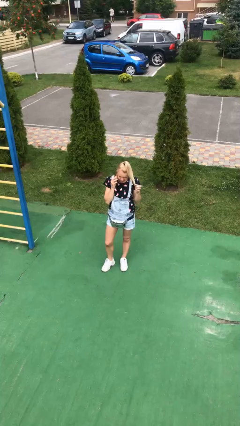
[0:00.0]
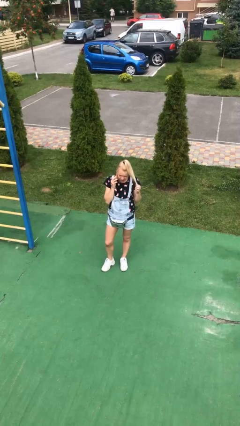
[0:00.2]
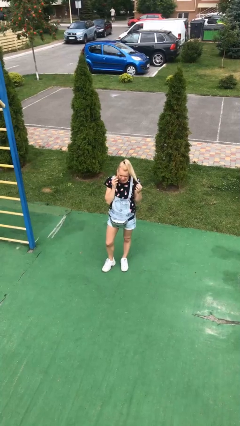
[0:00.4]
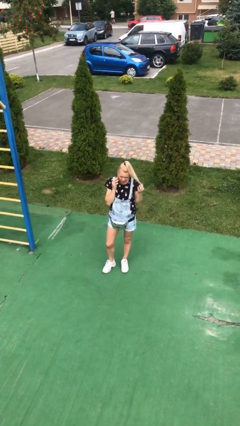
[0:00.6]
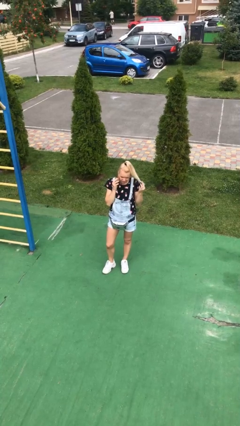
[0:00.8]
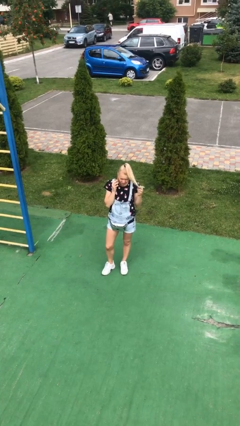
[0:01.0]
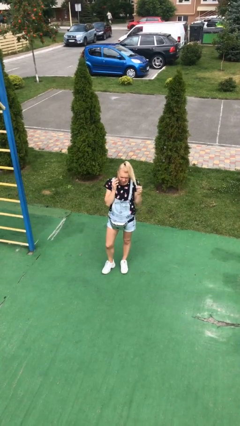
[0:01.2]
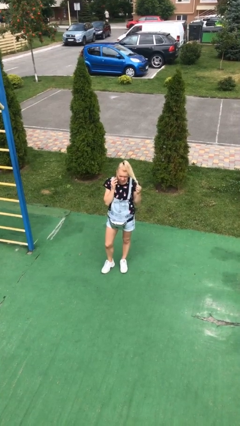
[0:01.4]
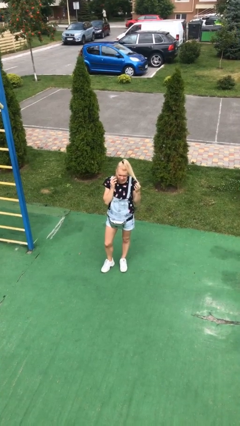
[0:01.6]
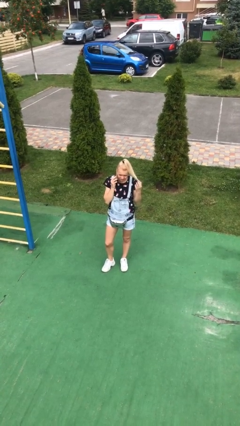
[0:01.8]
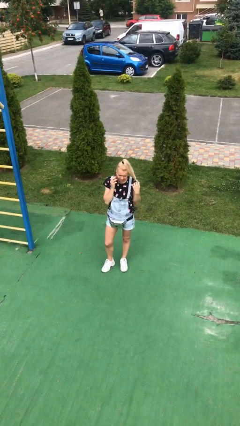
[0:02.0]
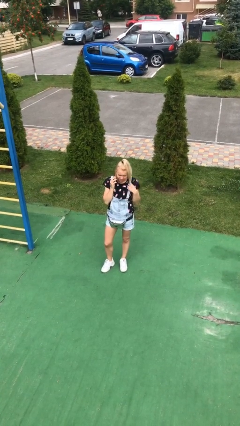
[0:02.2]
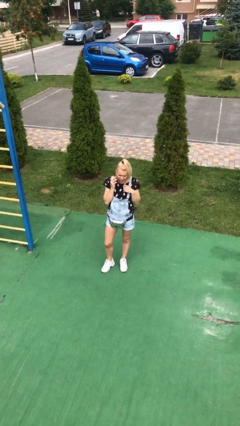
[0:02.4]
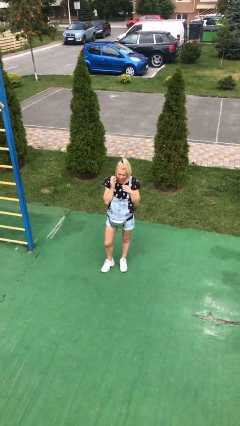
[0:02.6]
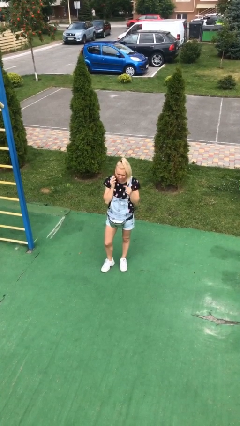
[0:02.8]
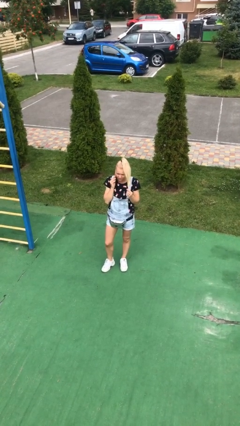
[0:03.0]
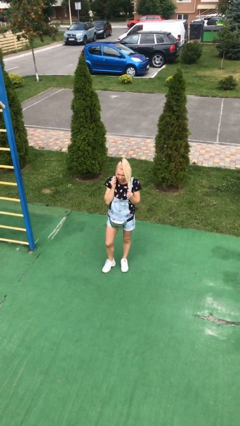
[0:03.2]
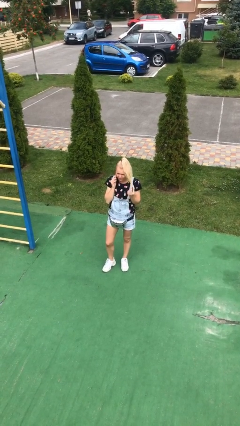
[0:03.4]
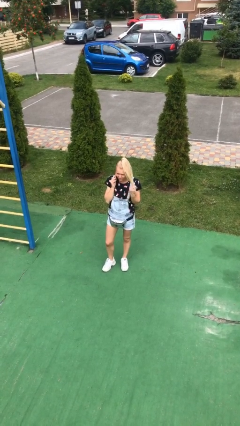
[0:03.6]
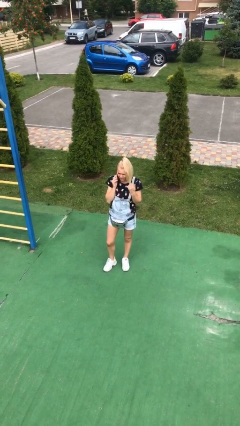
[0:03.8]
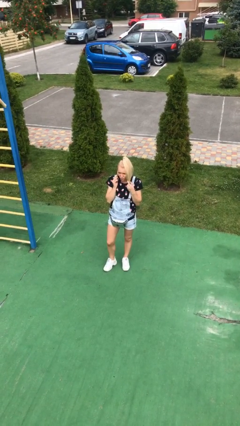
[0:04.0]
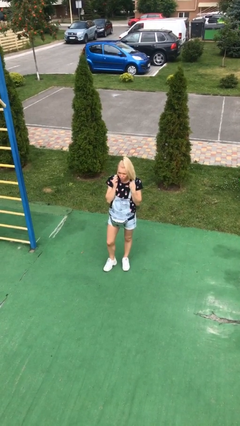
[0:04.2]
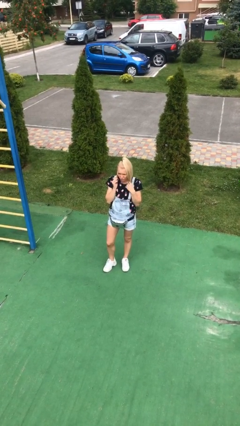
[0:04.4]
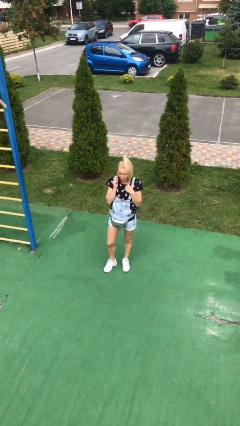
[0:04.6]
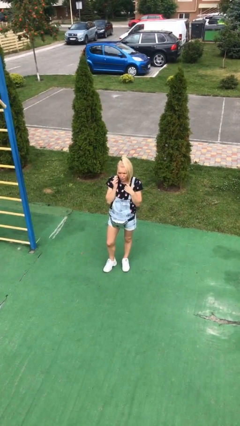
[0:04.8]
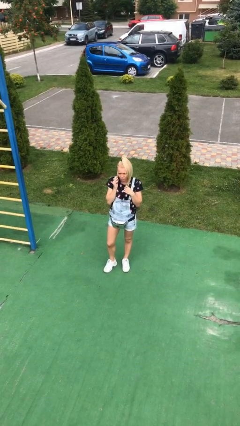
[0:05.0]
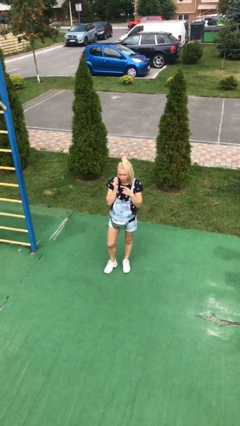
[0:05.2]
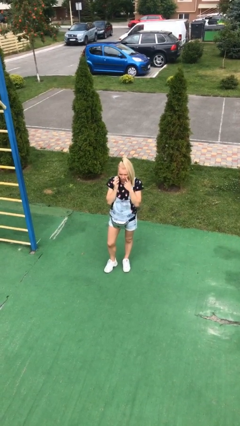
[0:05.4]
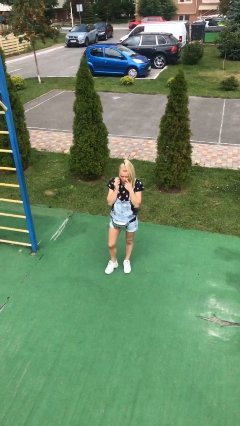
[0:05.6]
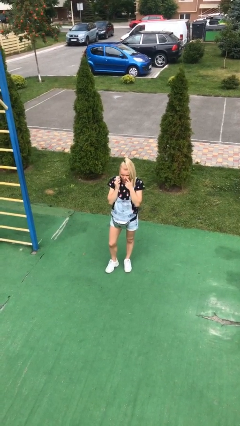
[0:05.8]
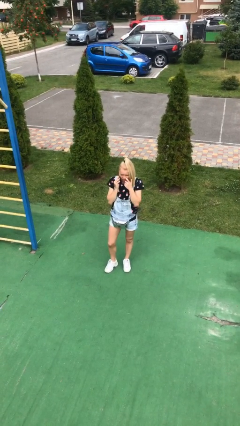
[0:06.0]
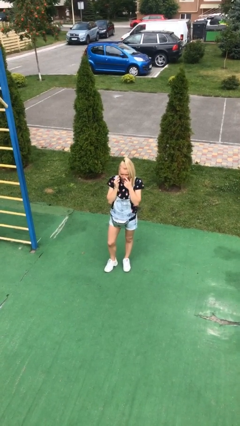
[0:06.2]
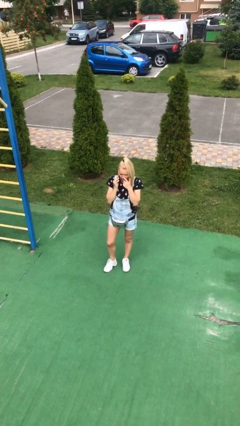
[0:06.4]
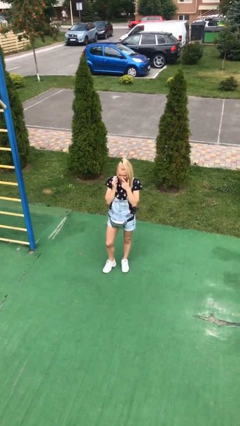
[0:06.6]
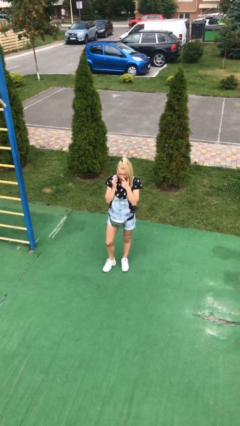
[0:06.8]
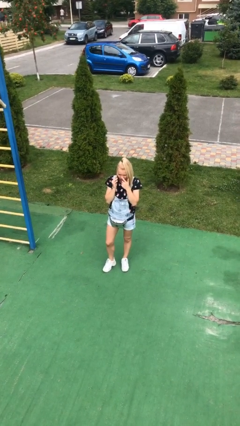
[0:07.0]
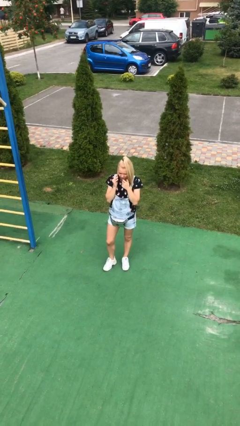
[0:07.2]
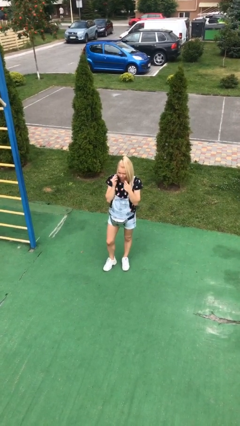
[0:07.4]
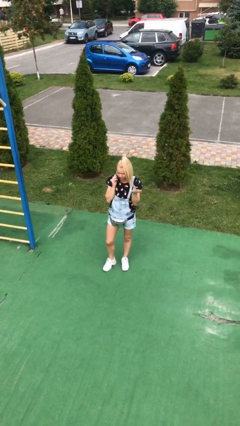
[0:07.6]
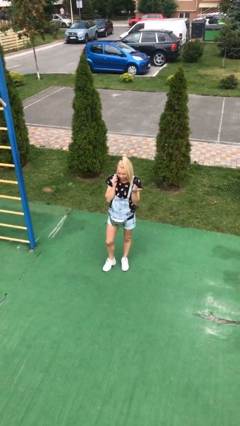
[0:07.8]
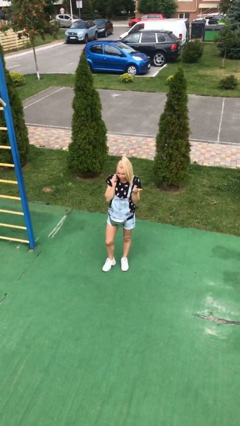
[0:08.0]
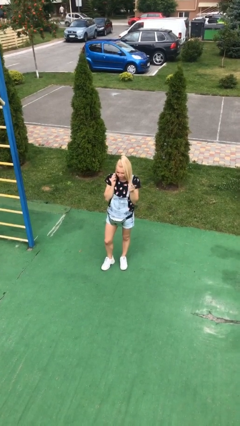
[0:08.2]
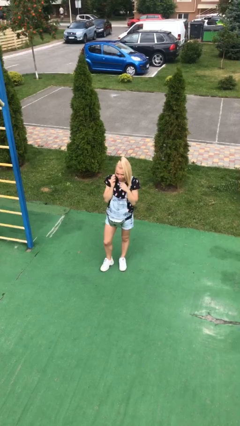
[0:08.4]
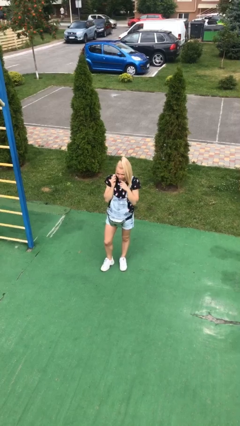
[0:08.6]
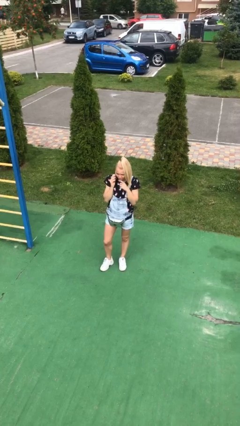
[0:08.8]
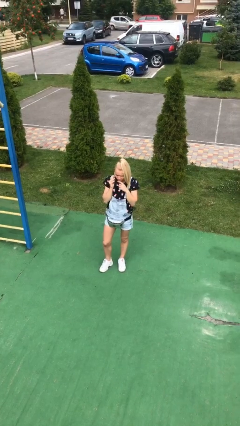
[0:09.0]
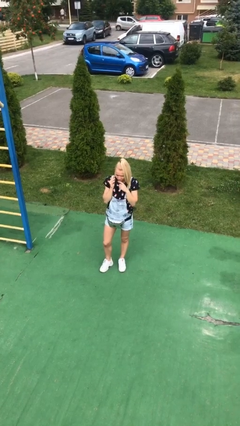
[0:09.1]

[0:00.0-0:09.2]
person talks on phone

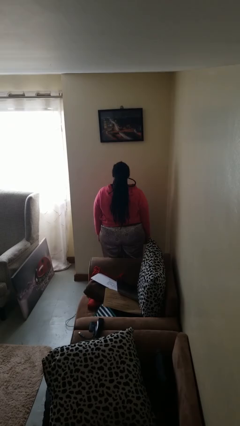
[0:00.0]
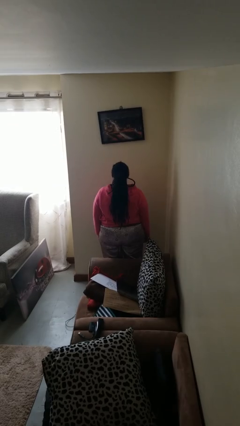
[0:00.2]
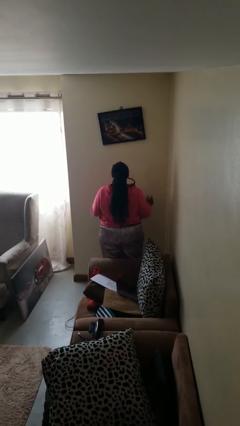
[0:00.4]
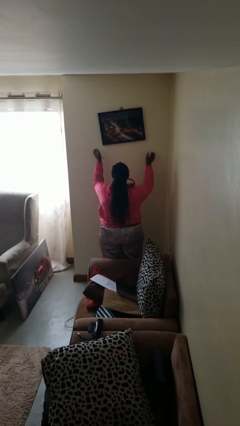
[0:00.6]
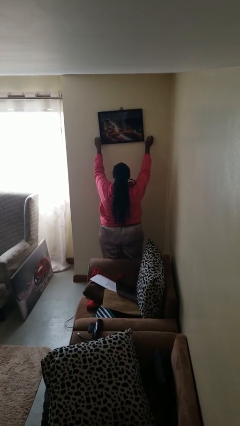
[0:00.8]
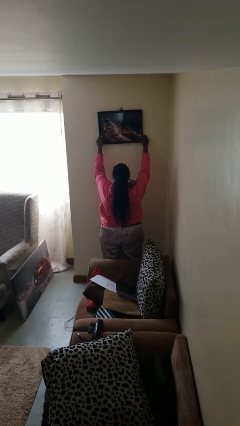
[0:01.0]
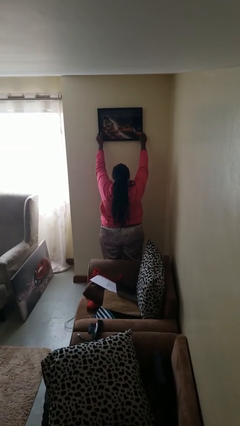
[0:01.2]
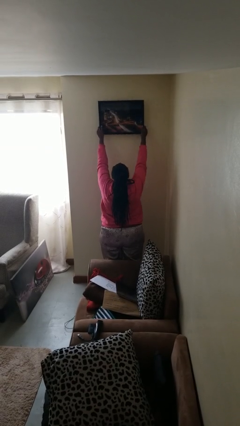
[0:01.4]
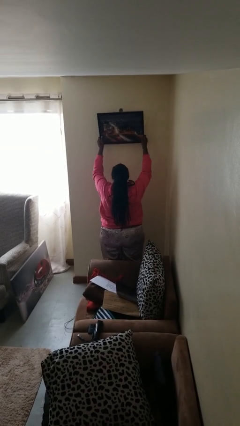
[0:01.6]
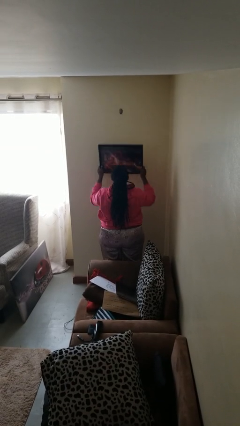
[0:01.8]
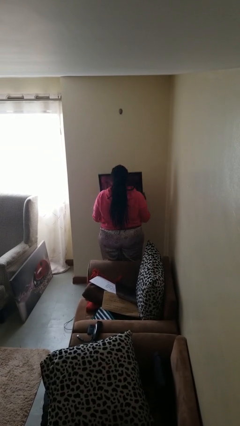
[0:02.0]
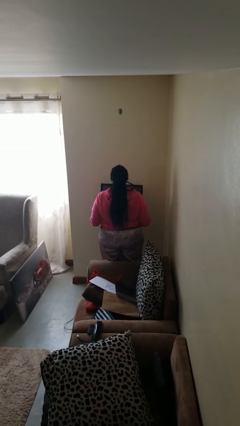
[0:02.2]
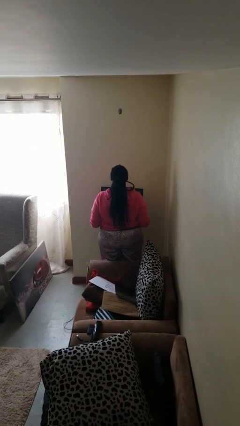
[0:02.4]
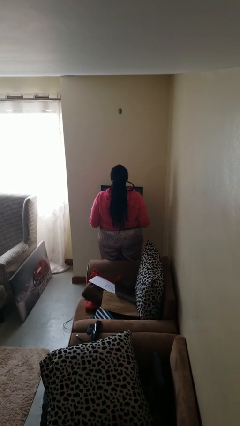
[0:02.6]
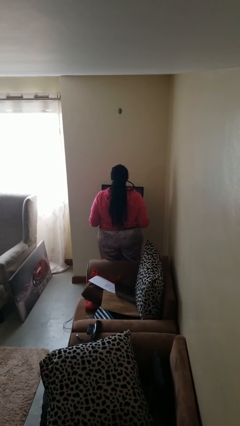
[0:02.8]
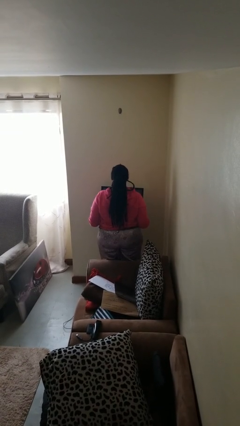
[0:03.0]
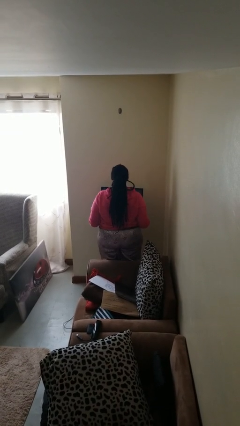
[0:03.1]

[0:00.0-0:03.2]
person takes down picture frame

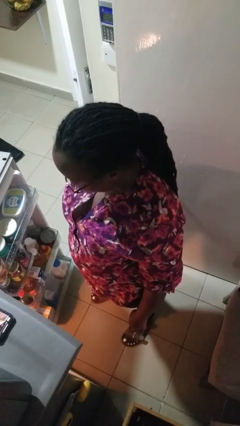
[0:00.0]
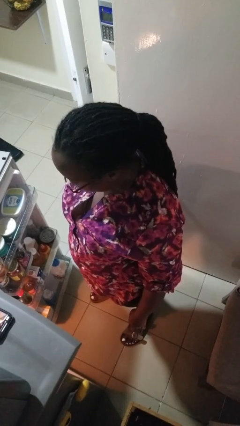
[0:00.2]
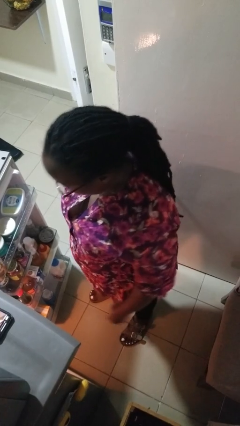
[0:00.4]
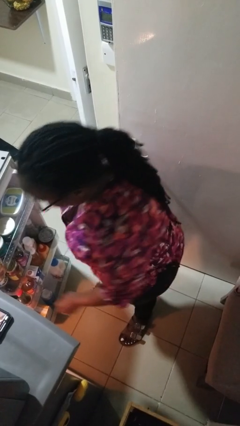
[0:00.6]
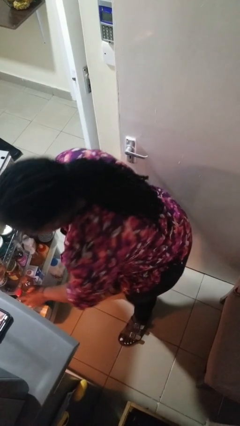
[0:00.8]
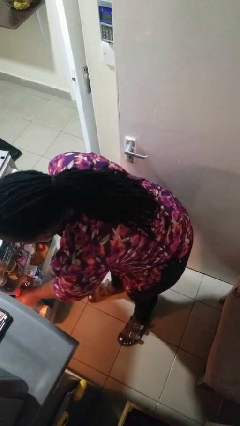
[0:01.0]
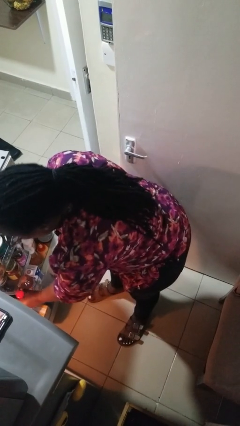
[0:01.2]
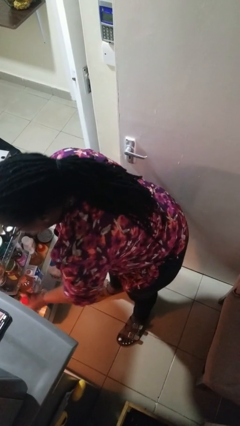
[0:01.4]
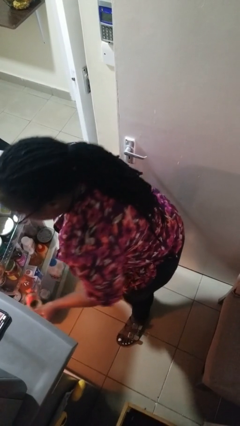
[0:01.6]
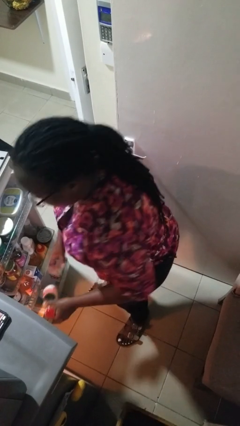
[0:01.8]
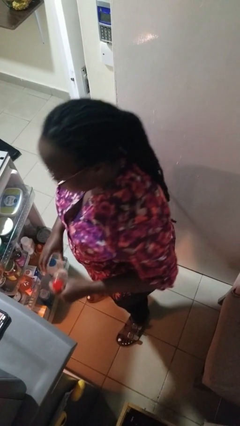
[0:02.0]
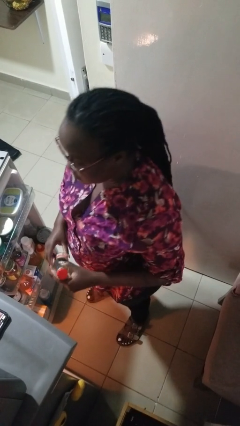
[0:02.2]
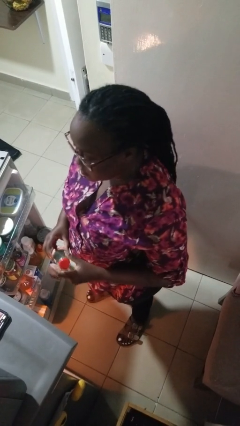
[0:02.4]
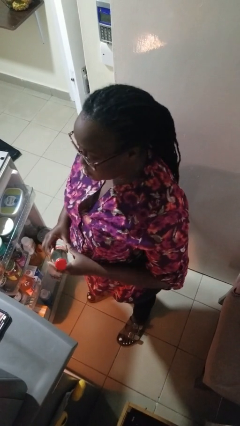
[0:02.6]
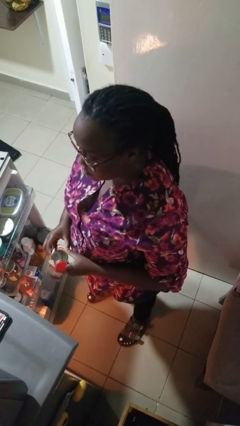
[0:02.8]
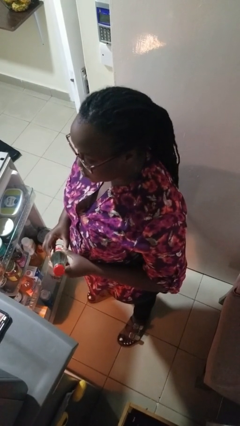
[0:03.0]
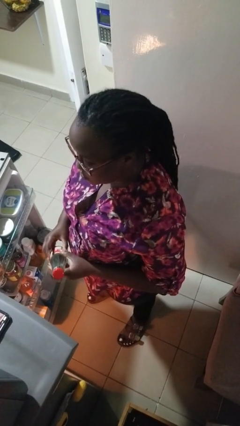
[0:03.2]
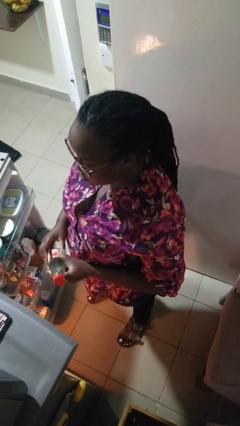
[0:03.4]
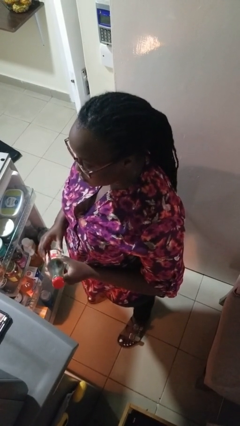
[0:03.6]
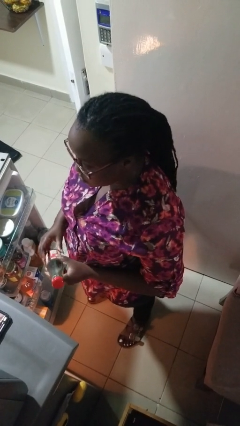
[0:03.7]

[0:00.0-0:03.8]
person takes object from refrigerator

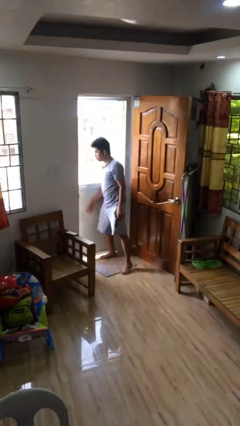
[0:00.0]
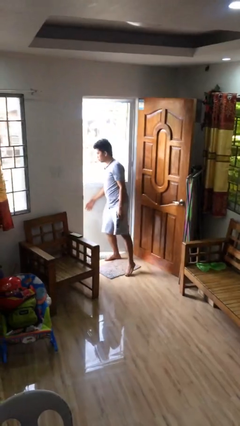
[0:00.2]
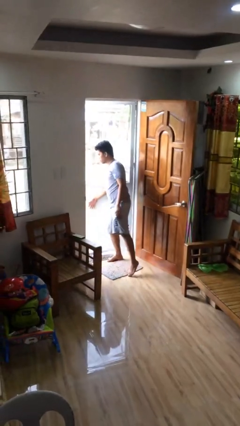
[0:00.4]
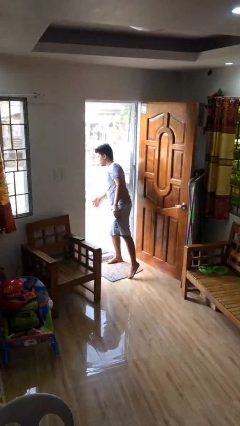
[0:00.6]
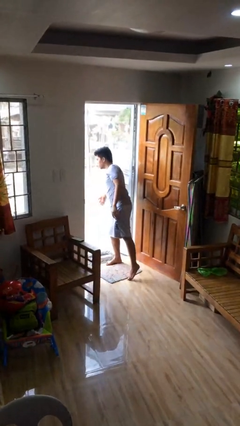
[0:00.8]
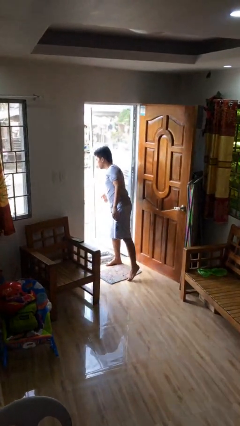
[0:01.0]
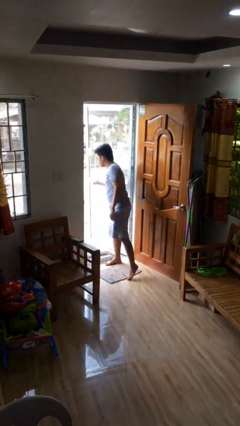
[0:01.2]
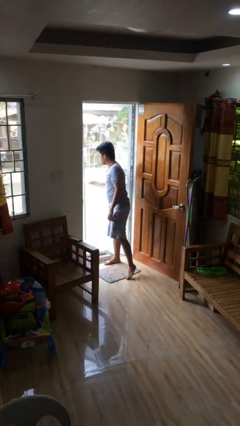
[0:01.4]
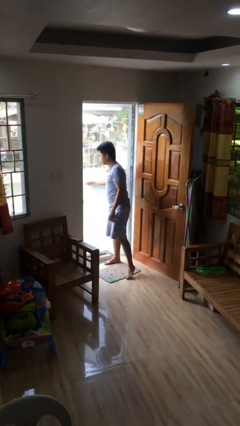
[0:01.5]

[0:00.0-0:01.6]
person opens facility door
